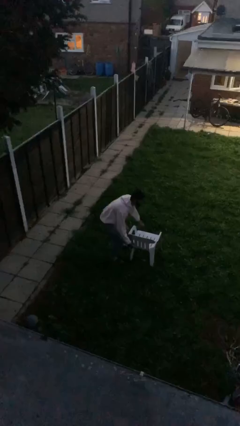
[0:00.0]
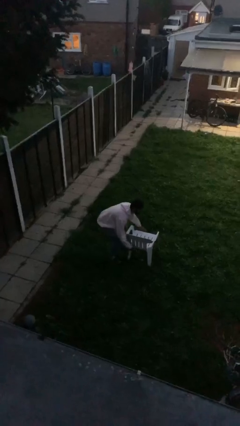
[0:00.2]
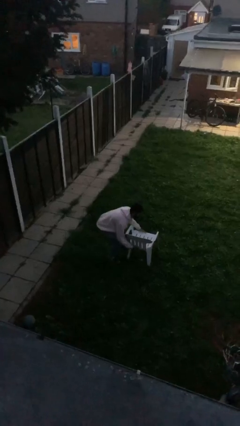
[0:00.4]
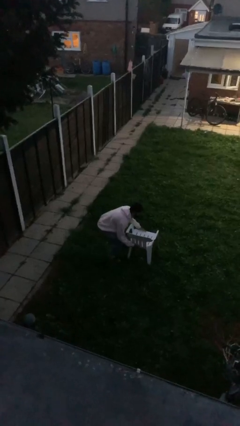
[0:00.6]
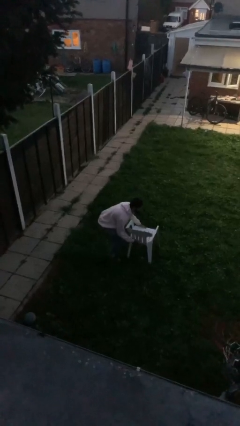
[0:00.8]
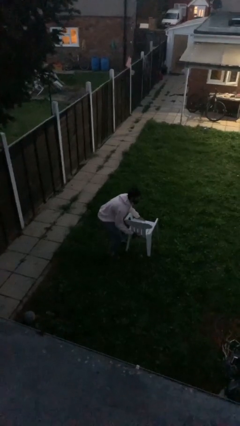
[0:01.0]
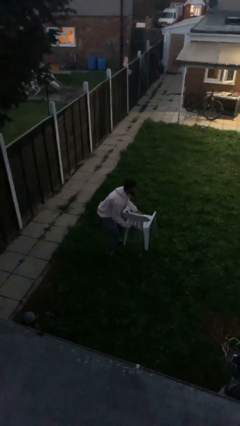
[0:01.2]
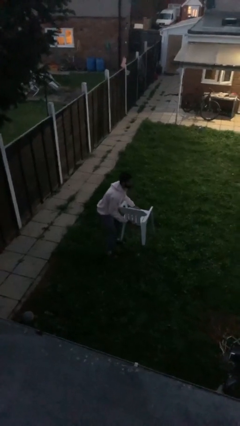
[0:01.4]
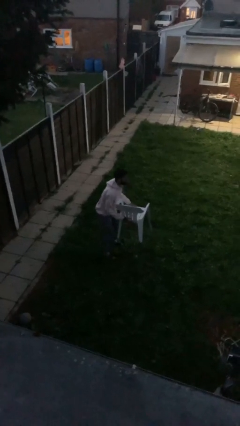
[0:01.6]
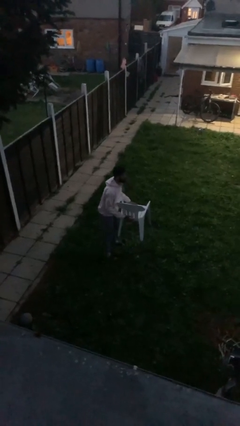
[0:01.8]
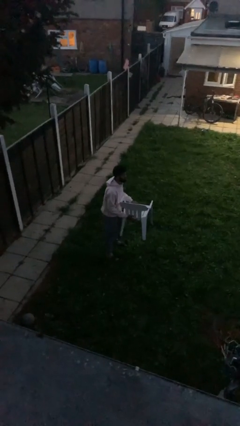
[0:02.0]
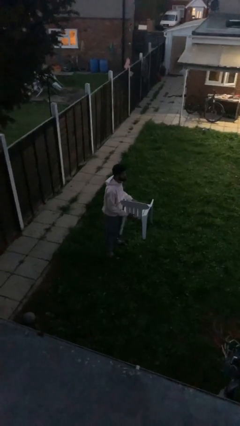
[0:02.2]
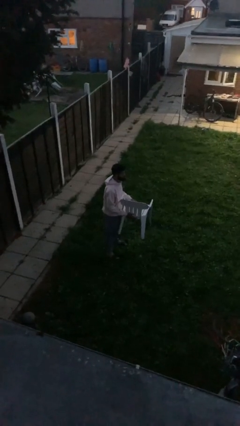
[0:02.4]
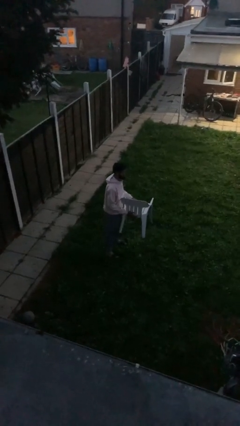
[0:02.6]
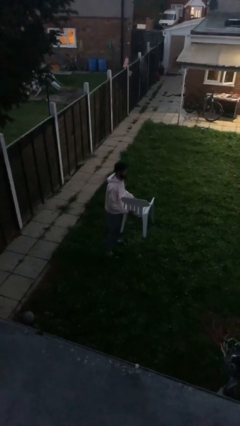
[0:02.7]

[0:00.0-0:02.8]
person picks up object from floor

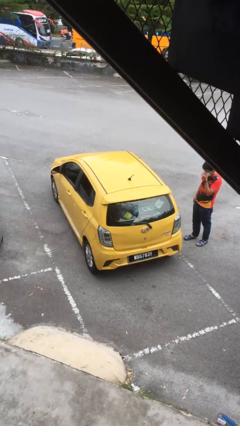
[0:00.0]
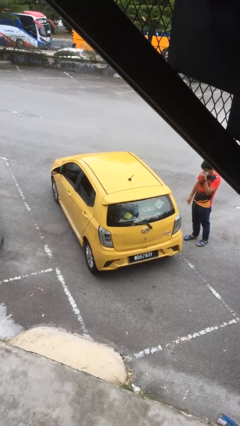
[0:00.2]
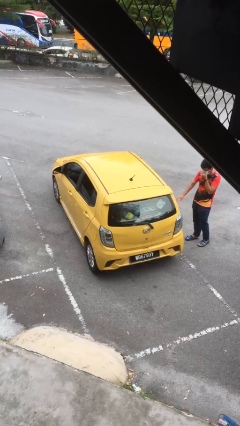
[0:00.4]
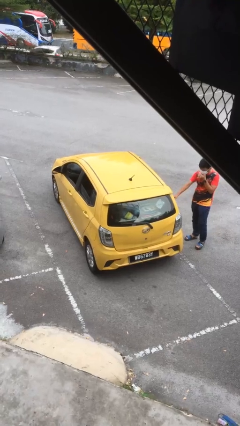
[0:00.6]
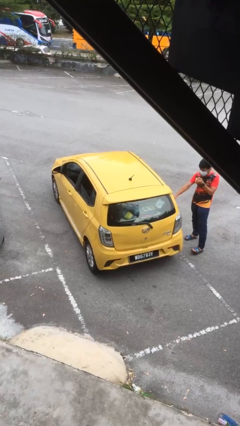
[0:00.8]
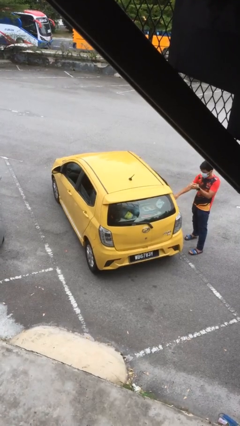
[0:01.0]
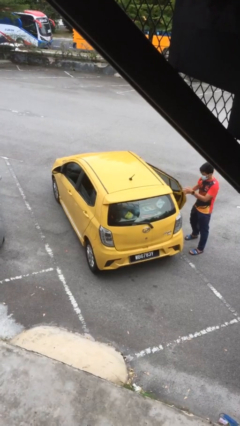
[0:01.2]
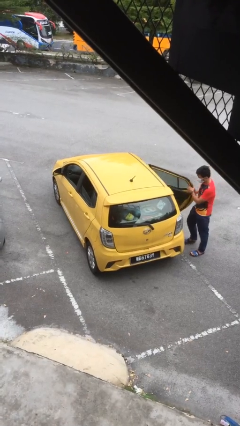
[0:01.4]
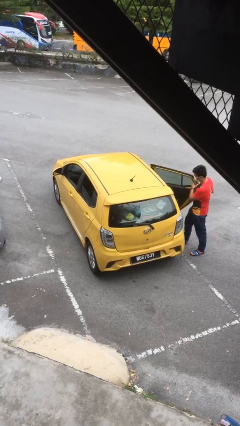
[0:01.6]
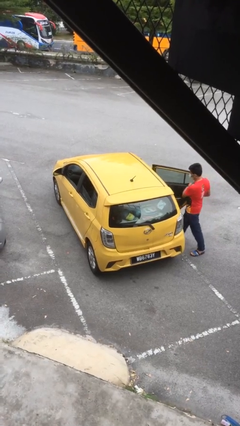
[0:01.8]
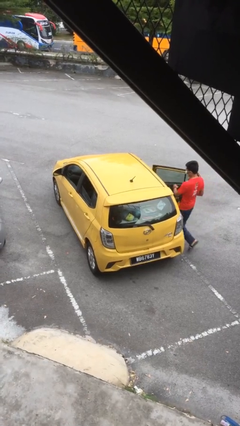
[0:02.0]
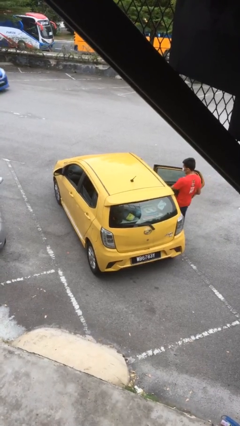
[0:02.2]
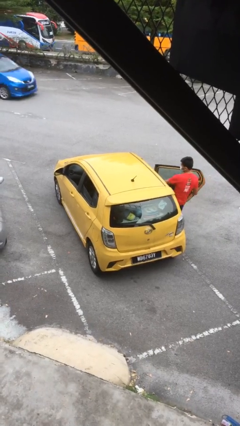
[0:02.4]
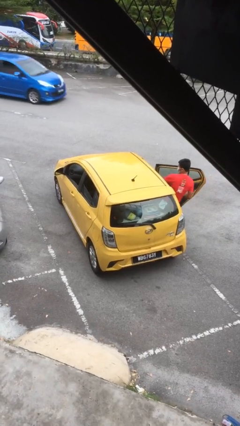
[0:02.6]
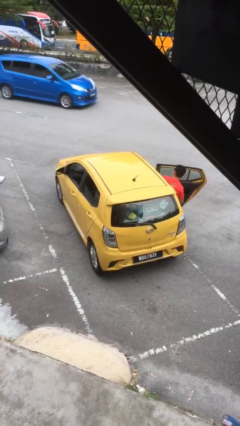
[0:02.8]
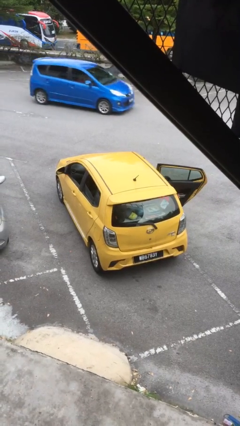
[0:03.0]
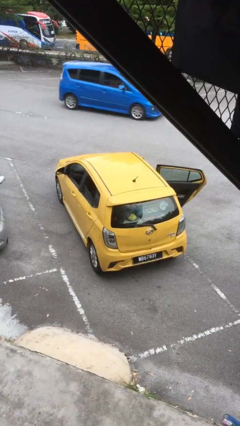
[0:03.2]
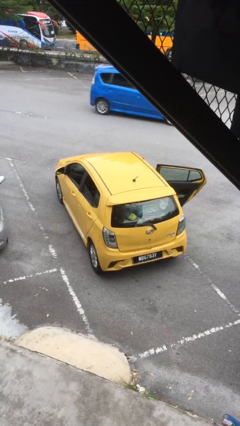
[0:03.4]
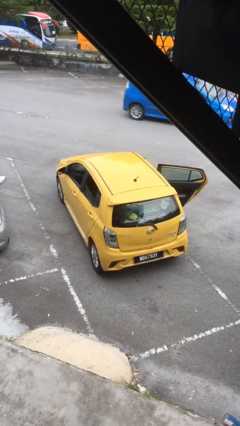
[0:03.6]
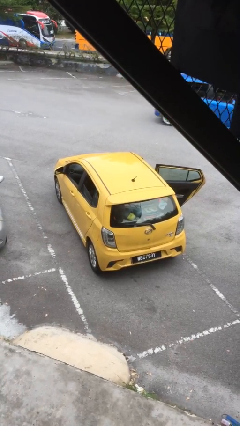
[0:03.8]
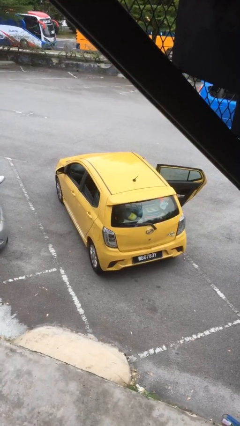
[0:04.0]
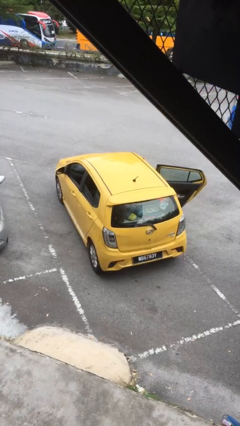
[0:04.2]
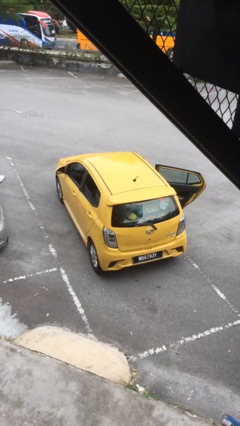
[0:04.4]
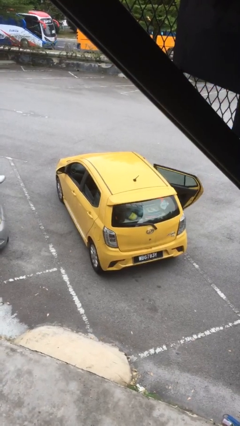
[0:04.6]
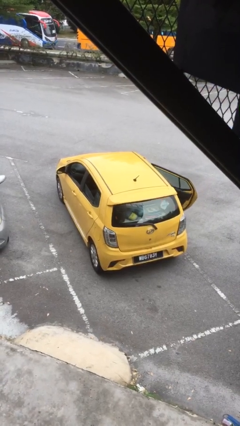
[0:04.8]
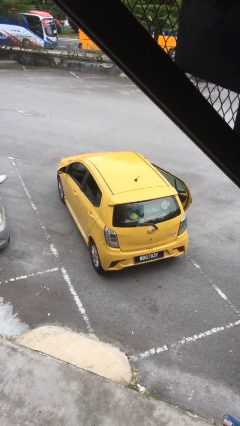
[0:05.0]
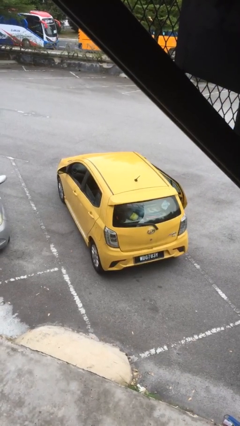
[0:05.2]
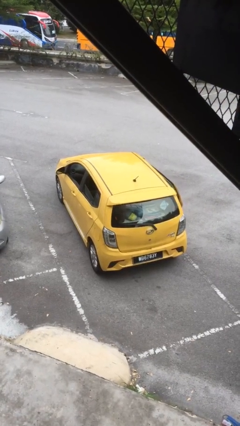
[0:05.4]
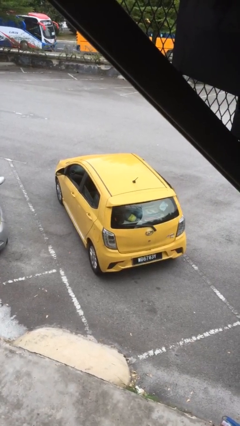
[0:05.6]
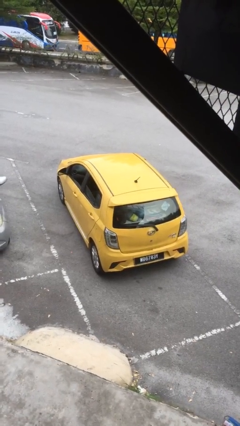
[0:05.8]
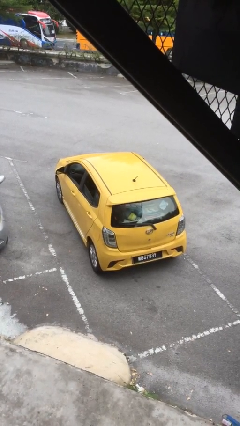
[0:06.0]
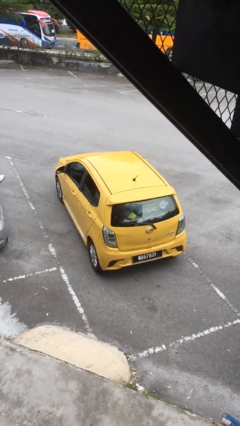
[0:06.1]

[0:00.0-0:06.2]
car picks up person

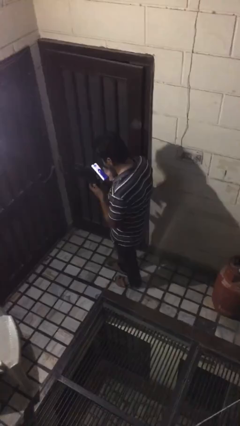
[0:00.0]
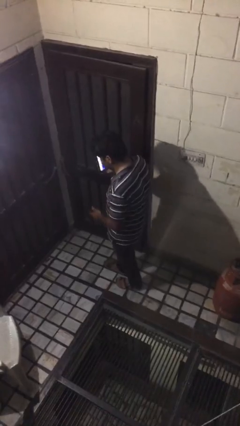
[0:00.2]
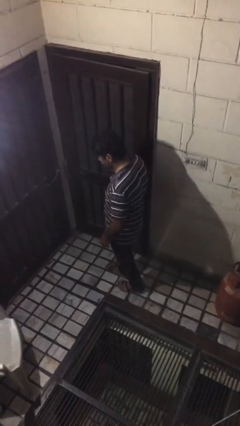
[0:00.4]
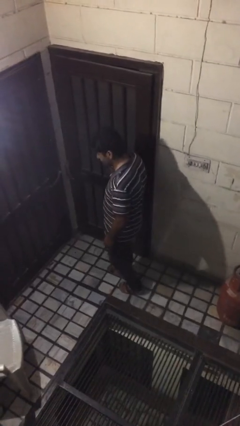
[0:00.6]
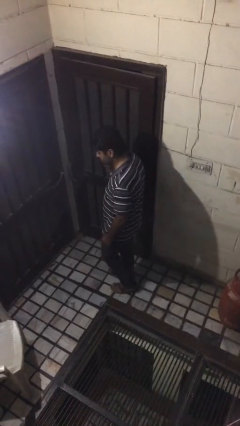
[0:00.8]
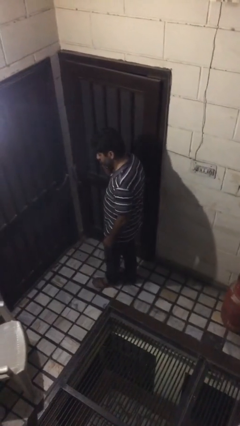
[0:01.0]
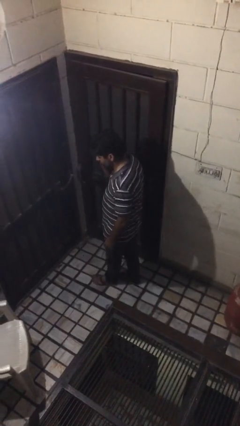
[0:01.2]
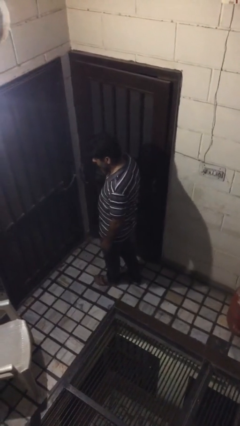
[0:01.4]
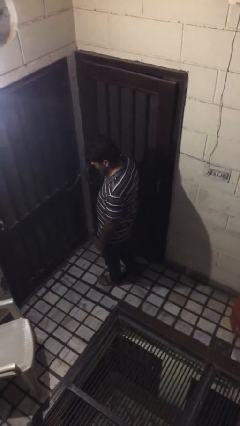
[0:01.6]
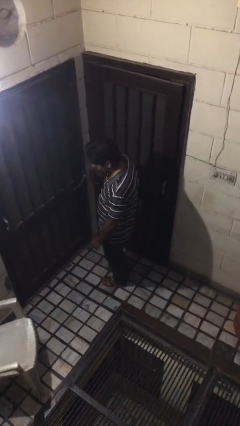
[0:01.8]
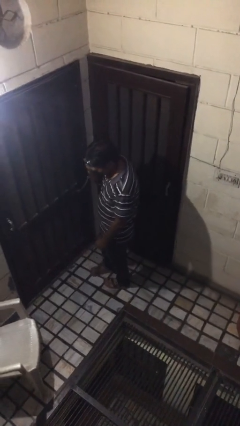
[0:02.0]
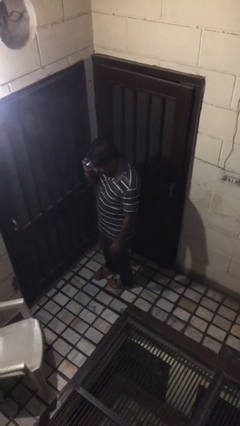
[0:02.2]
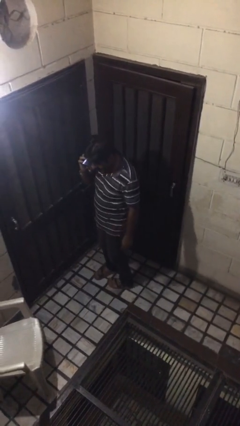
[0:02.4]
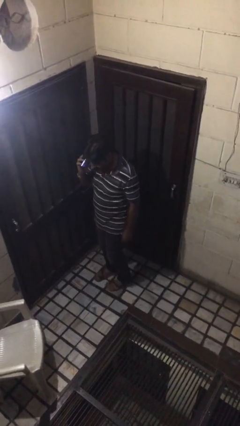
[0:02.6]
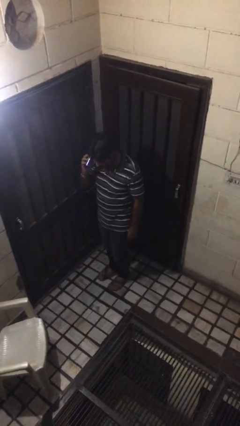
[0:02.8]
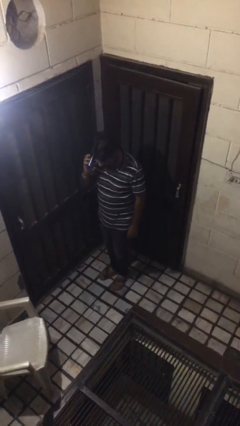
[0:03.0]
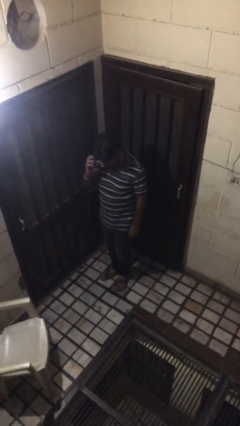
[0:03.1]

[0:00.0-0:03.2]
person talks on phone

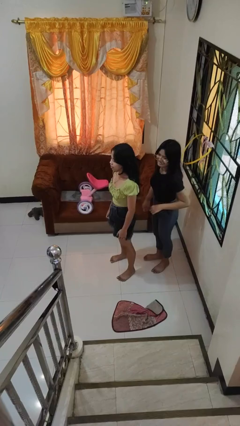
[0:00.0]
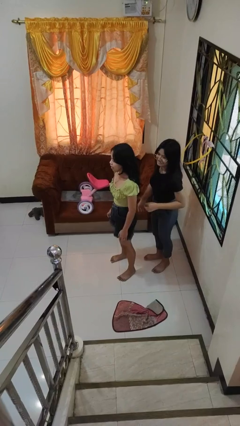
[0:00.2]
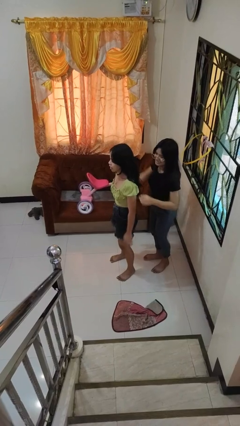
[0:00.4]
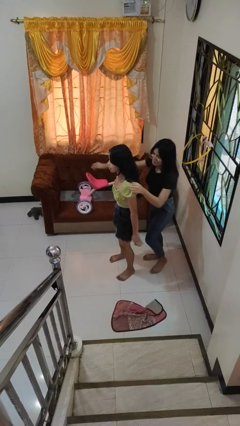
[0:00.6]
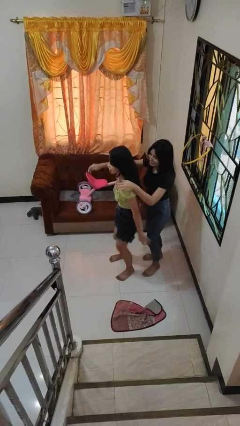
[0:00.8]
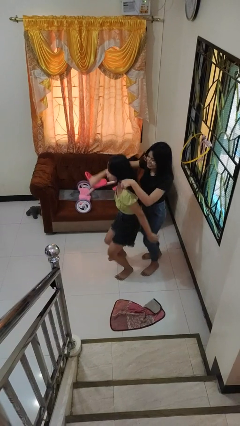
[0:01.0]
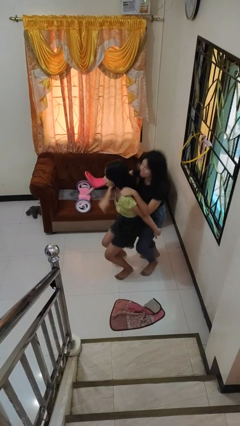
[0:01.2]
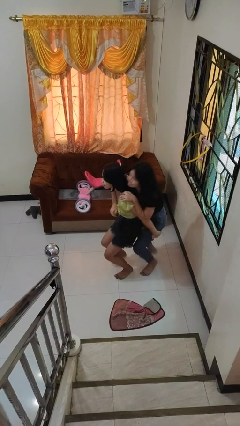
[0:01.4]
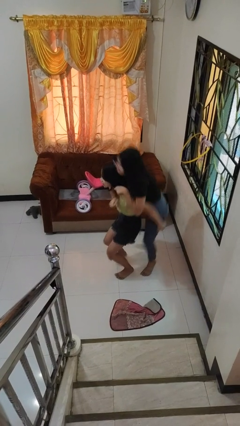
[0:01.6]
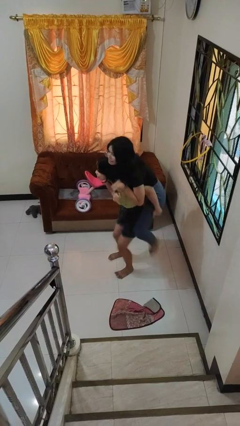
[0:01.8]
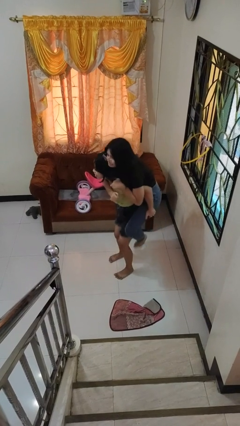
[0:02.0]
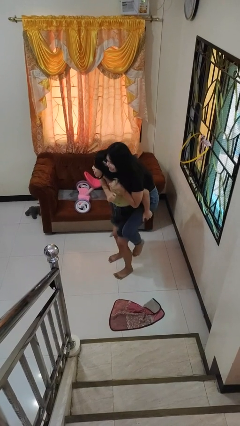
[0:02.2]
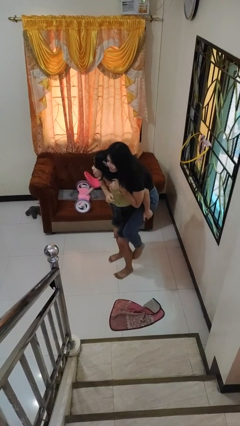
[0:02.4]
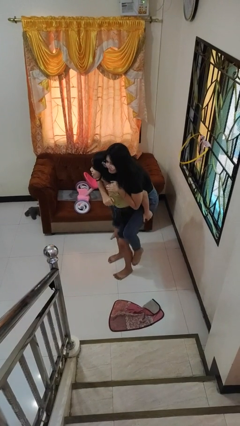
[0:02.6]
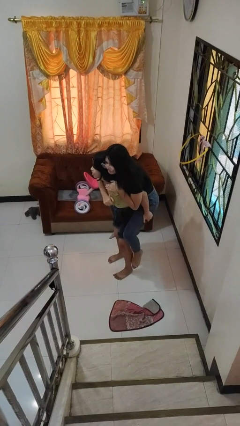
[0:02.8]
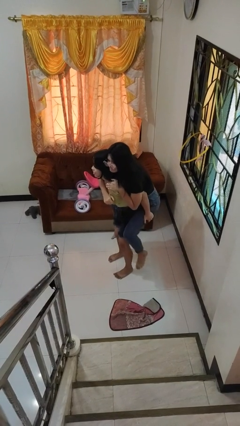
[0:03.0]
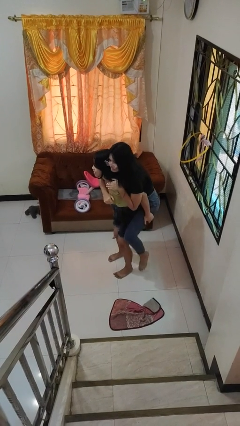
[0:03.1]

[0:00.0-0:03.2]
person carries person over shoulder

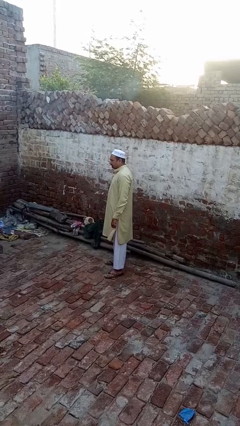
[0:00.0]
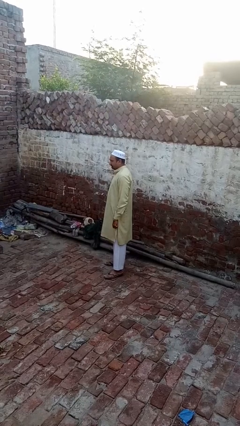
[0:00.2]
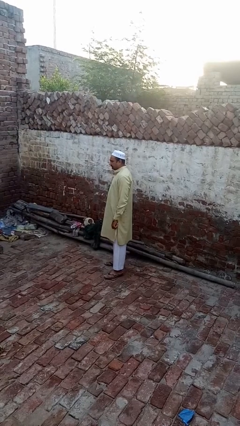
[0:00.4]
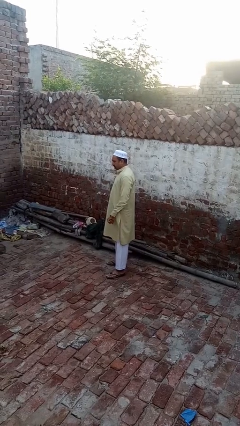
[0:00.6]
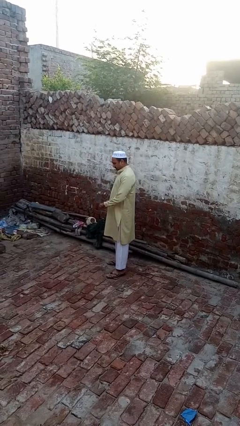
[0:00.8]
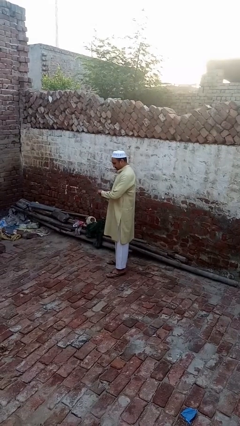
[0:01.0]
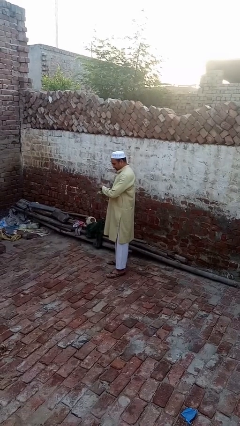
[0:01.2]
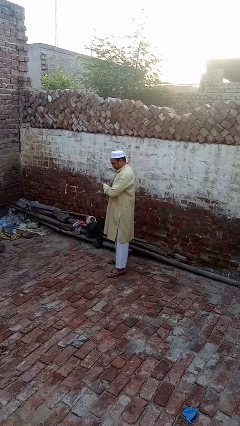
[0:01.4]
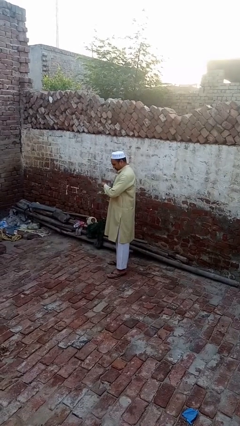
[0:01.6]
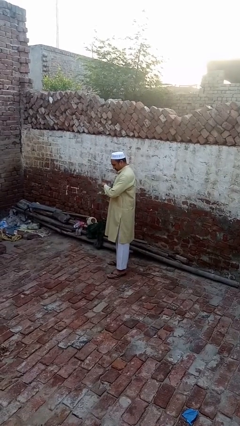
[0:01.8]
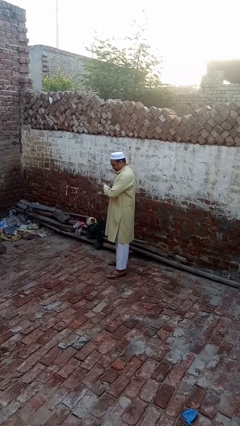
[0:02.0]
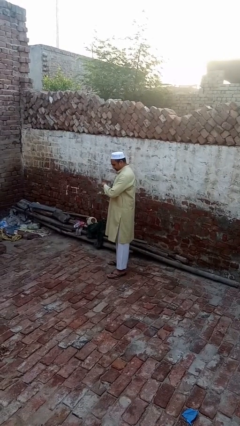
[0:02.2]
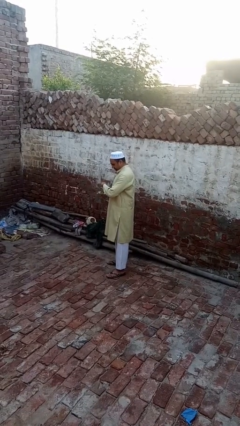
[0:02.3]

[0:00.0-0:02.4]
person looks at wristwatch
